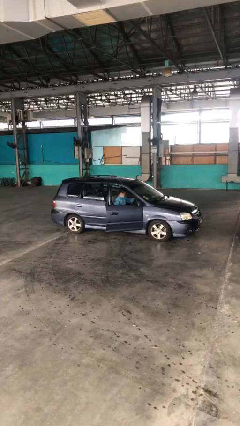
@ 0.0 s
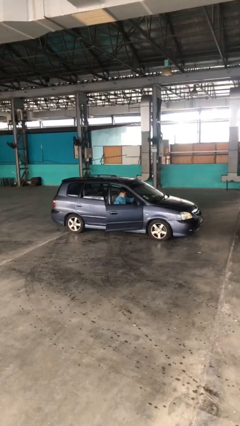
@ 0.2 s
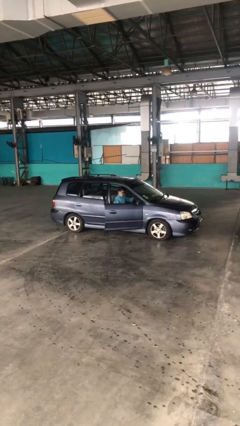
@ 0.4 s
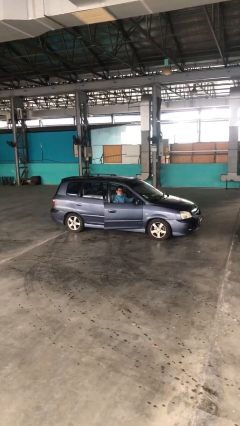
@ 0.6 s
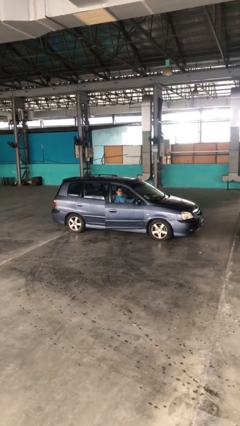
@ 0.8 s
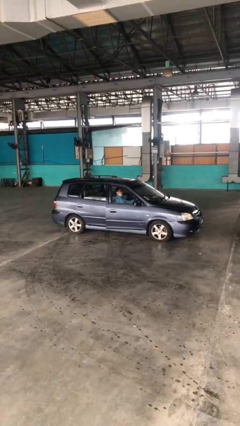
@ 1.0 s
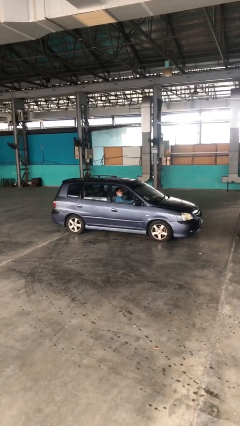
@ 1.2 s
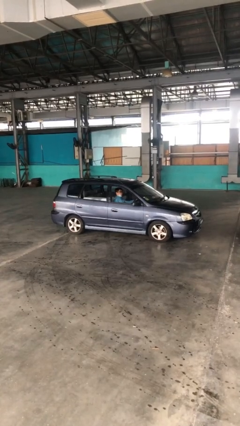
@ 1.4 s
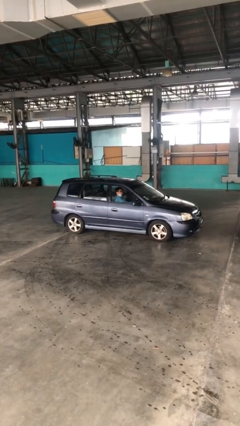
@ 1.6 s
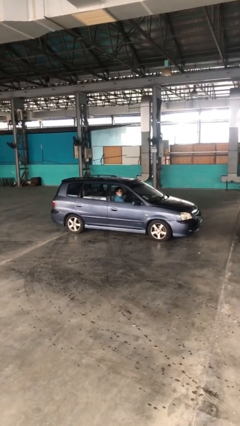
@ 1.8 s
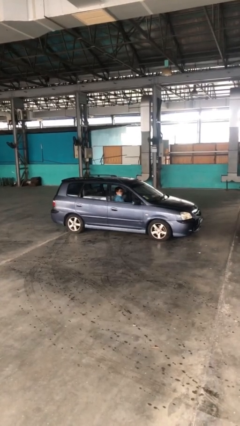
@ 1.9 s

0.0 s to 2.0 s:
person closes car door

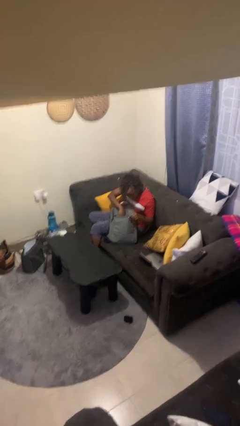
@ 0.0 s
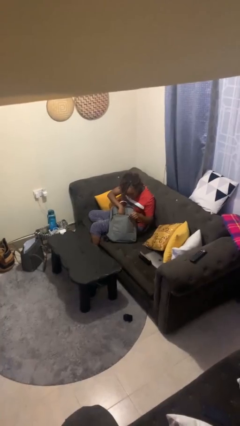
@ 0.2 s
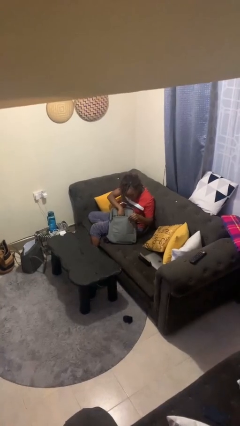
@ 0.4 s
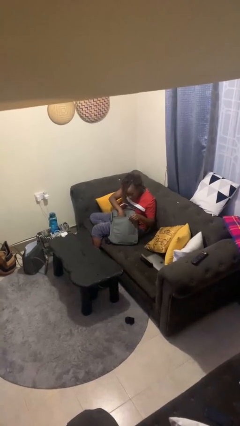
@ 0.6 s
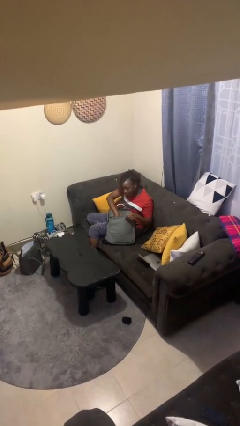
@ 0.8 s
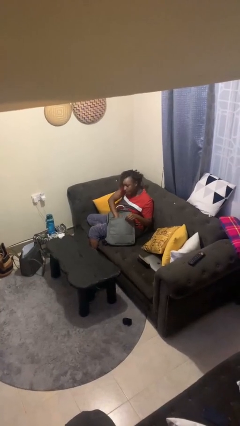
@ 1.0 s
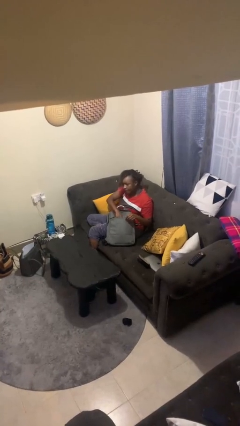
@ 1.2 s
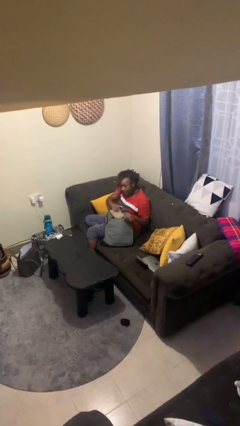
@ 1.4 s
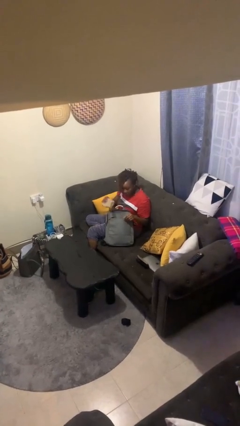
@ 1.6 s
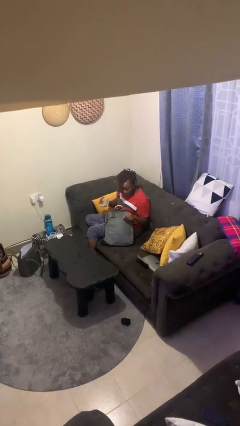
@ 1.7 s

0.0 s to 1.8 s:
person takes object from backpack

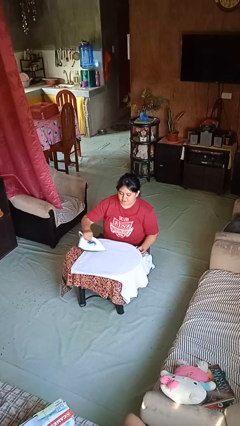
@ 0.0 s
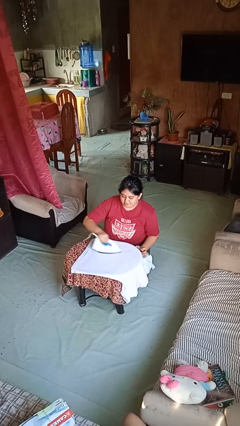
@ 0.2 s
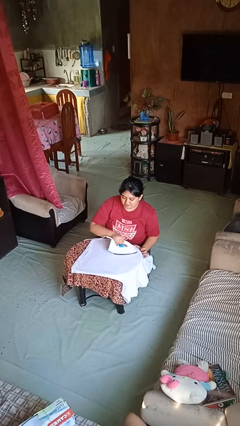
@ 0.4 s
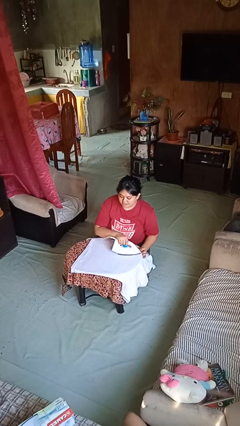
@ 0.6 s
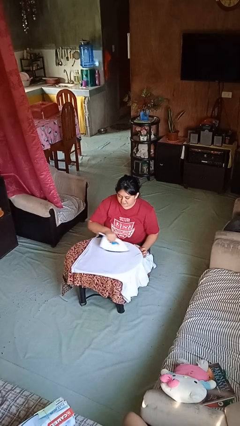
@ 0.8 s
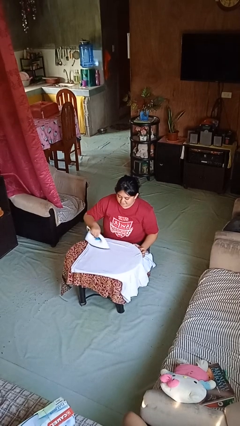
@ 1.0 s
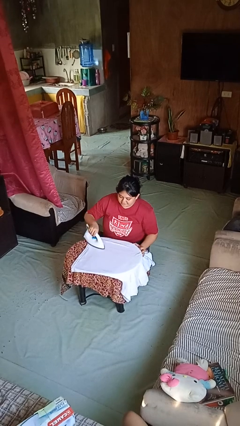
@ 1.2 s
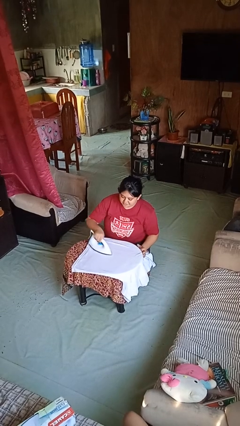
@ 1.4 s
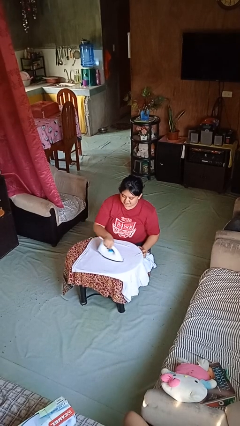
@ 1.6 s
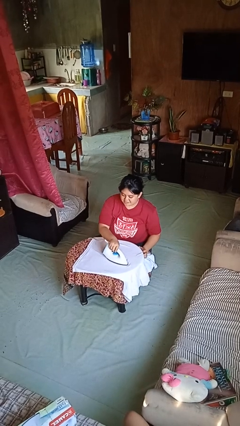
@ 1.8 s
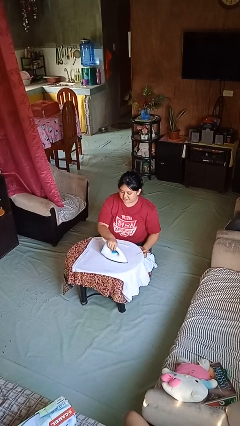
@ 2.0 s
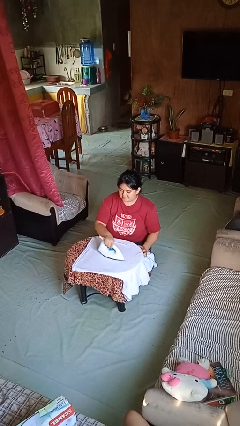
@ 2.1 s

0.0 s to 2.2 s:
person irons clothes

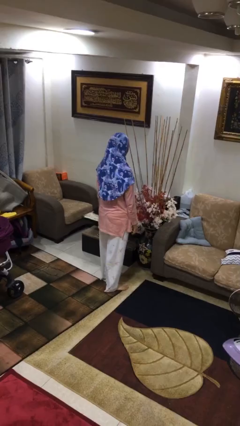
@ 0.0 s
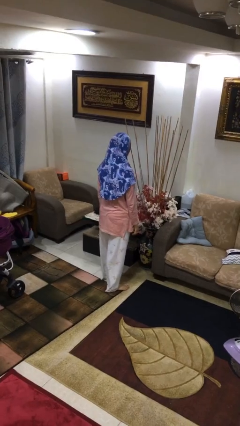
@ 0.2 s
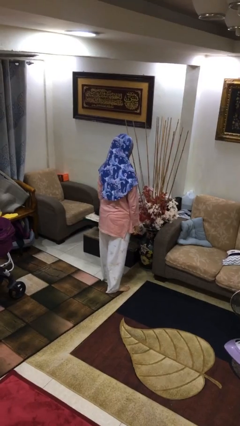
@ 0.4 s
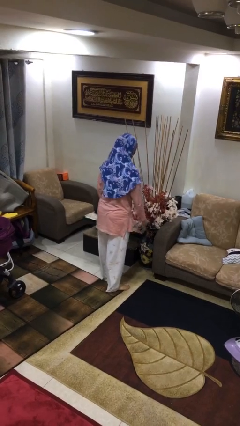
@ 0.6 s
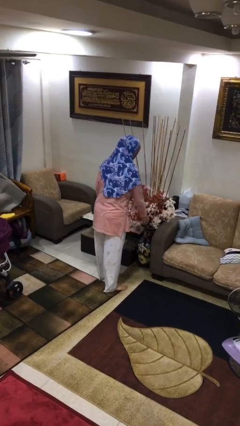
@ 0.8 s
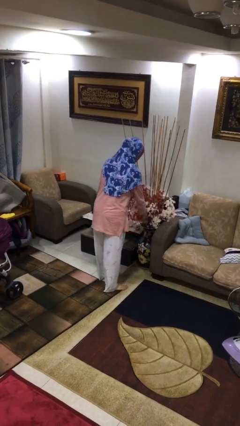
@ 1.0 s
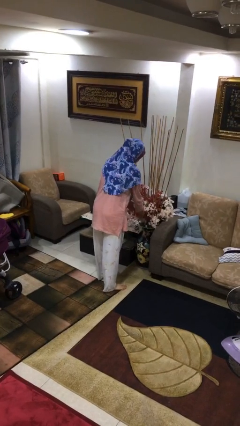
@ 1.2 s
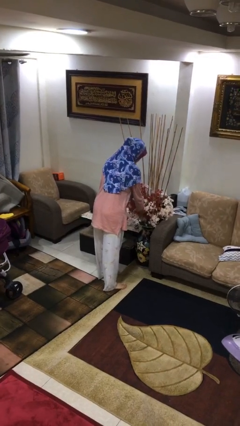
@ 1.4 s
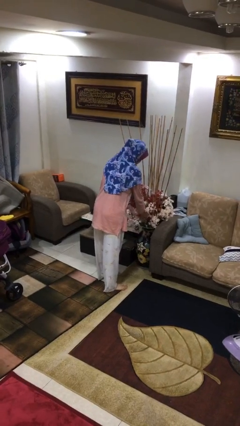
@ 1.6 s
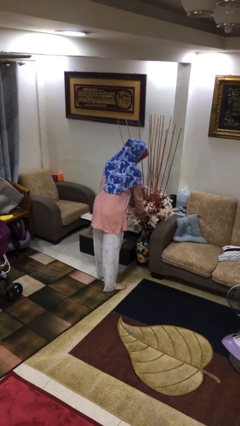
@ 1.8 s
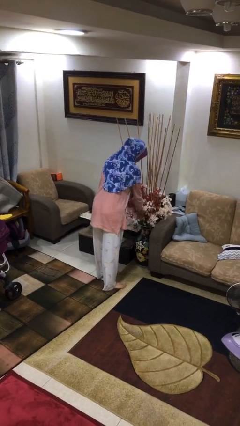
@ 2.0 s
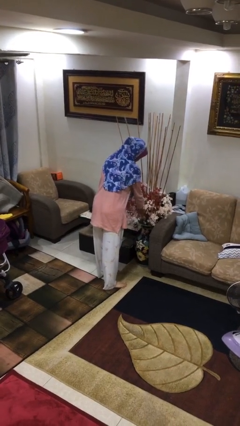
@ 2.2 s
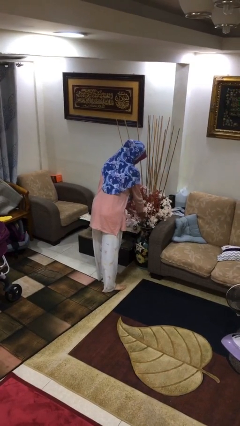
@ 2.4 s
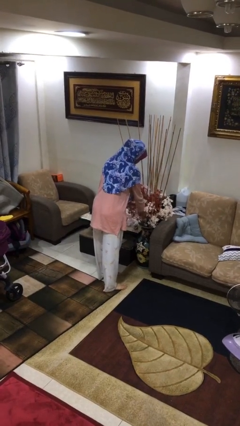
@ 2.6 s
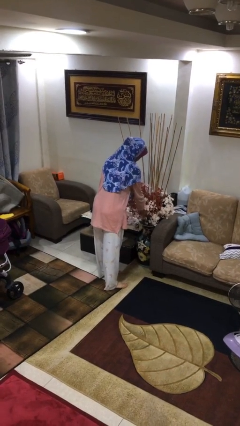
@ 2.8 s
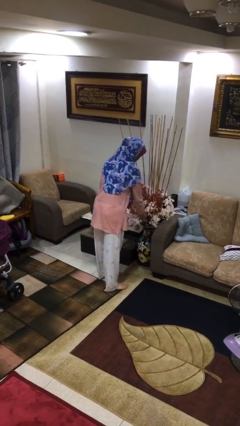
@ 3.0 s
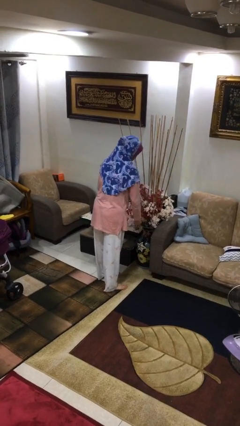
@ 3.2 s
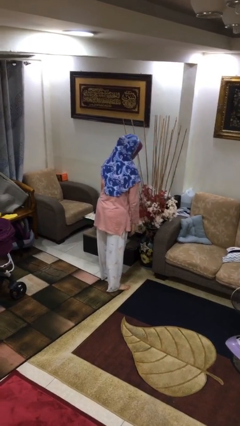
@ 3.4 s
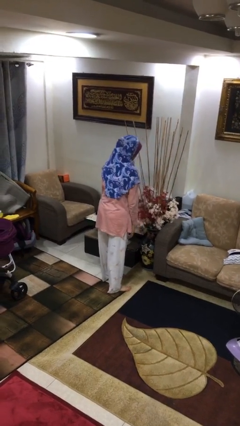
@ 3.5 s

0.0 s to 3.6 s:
person arranges flowers in vase

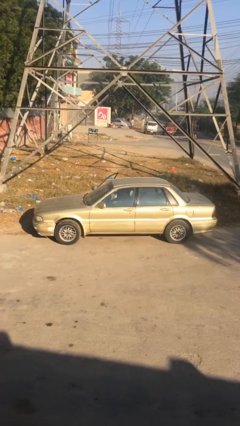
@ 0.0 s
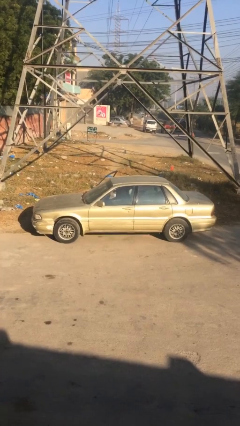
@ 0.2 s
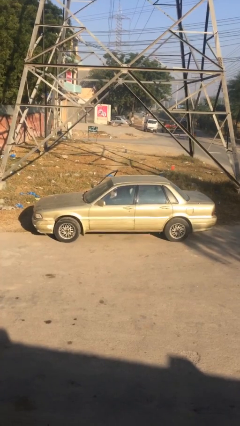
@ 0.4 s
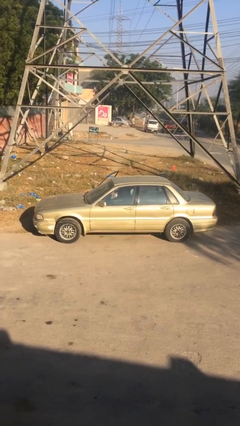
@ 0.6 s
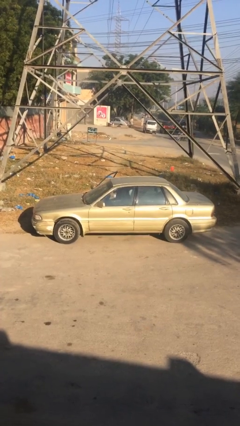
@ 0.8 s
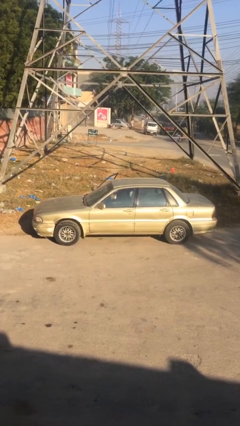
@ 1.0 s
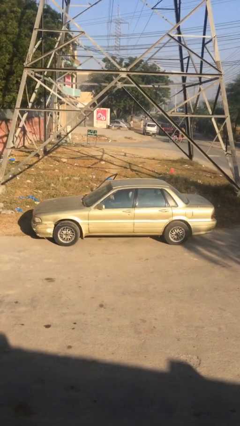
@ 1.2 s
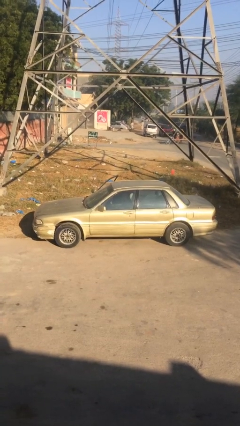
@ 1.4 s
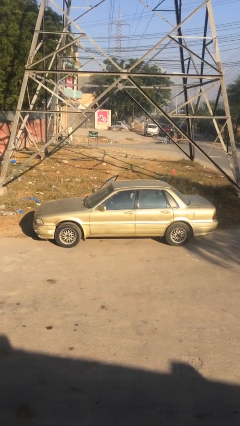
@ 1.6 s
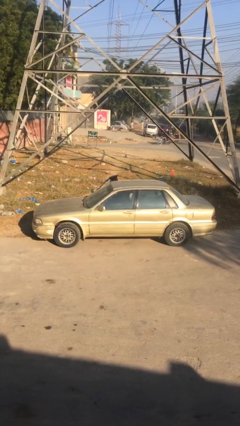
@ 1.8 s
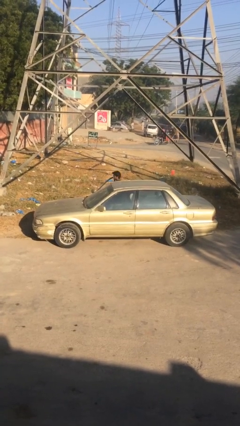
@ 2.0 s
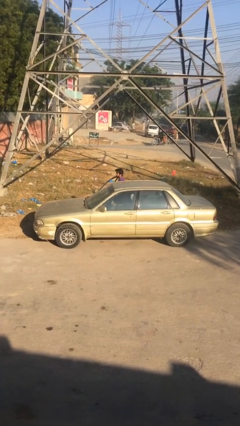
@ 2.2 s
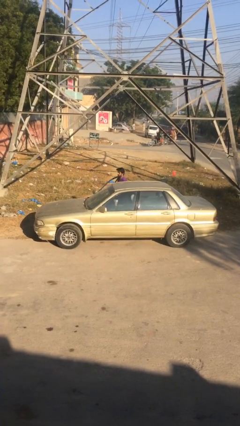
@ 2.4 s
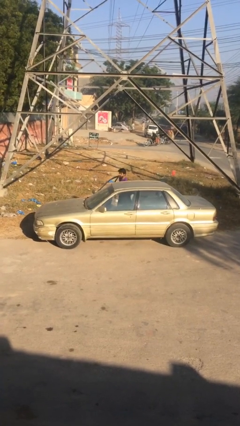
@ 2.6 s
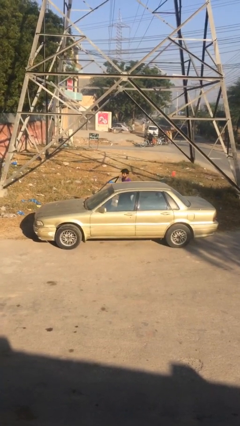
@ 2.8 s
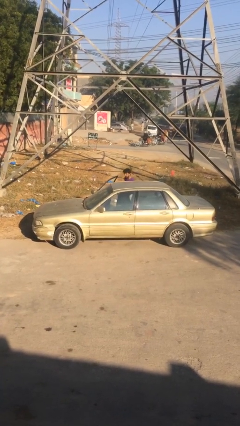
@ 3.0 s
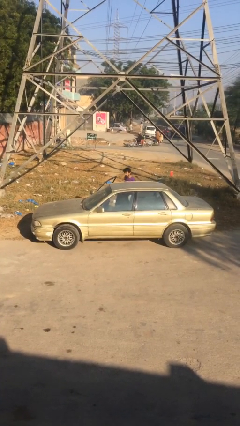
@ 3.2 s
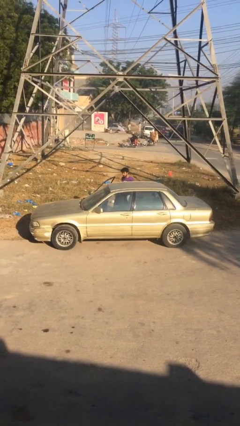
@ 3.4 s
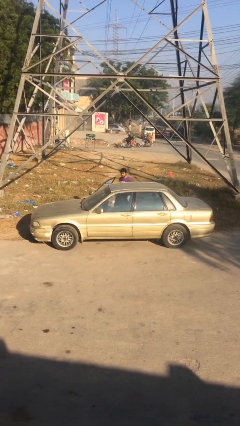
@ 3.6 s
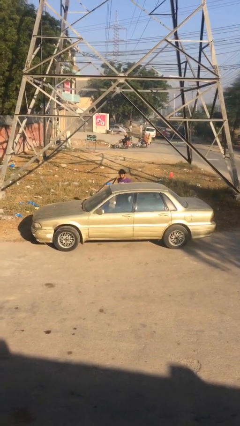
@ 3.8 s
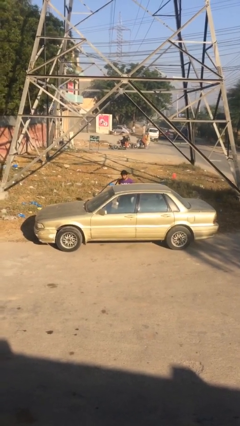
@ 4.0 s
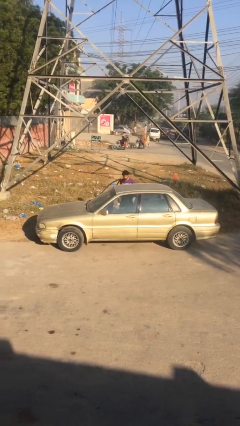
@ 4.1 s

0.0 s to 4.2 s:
person exits car

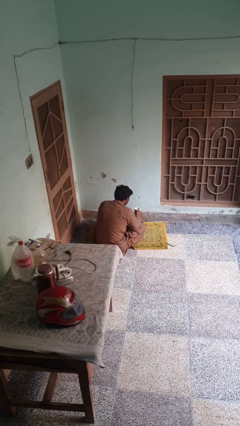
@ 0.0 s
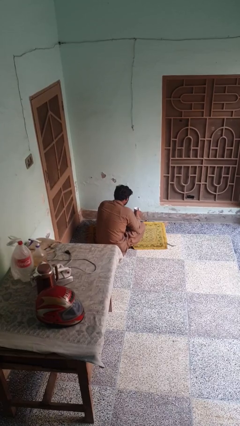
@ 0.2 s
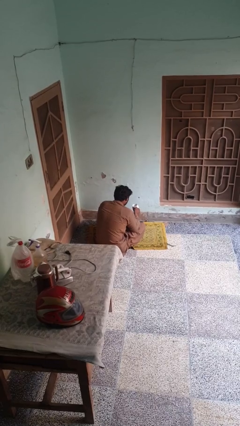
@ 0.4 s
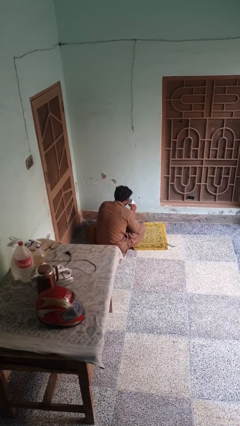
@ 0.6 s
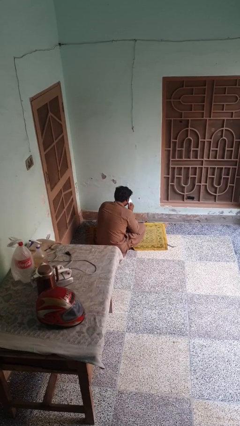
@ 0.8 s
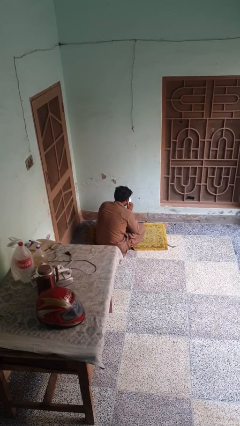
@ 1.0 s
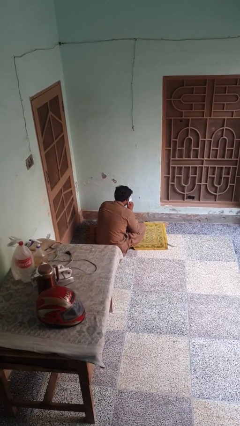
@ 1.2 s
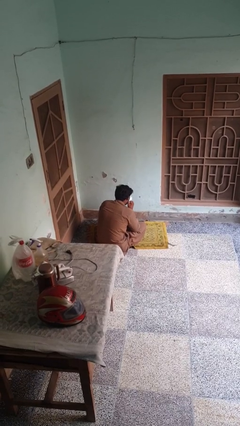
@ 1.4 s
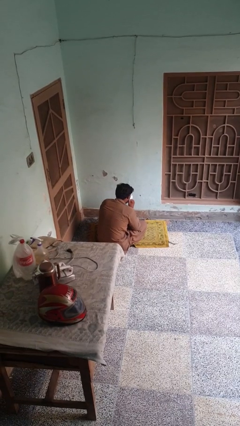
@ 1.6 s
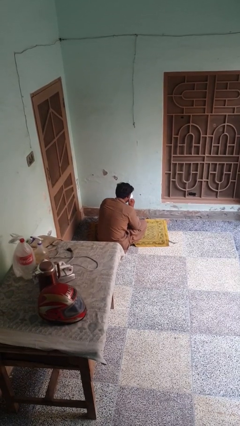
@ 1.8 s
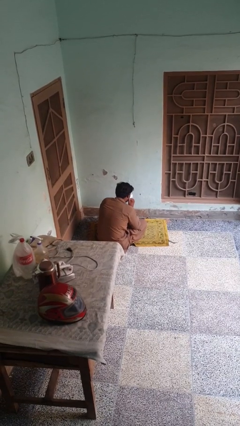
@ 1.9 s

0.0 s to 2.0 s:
person drinks from mug

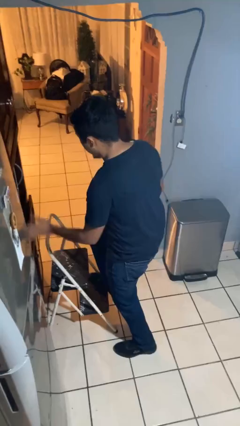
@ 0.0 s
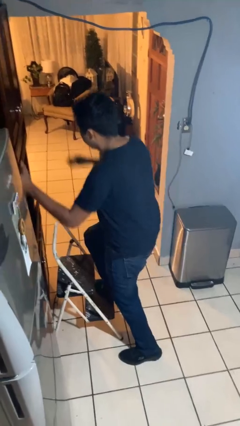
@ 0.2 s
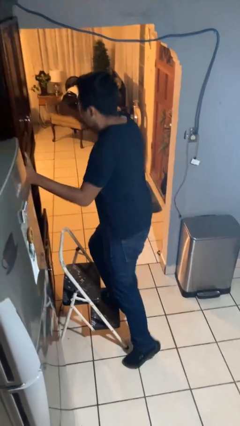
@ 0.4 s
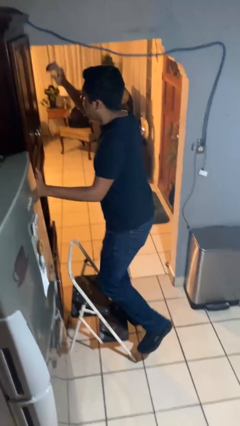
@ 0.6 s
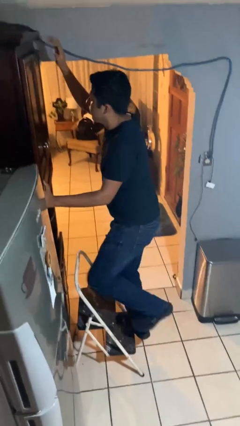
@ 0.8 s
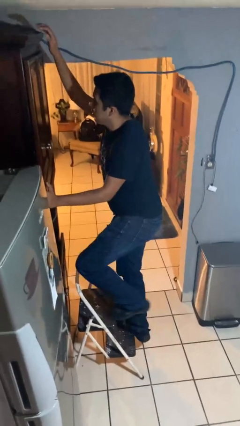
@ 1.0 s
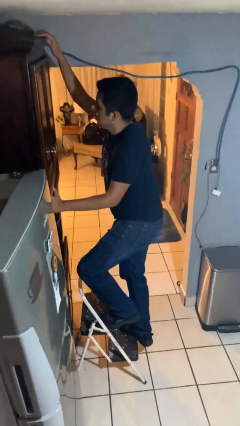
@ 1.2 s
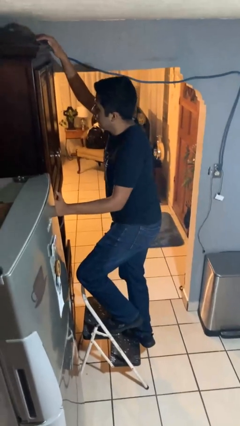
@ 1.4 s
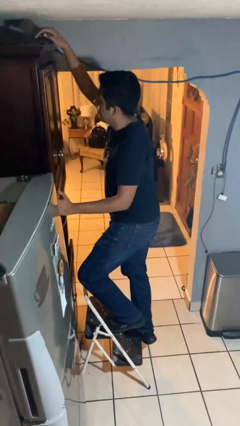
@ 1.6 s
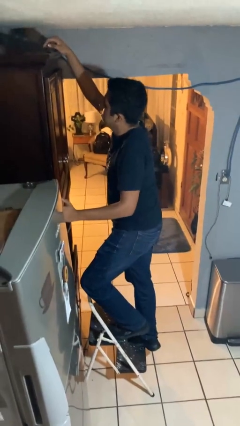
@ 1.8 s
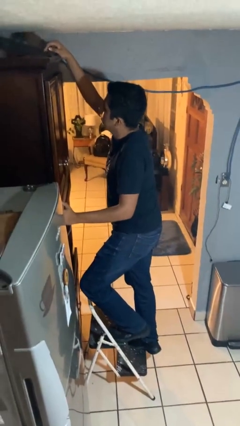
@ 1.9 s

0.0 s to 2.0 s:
person climbs up ladder
